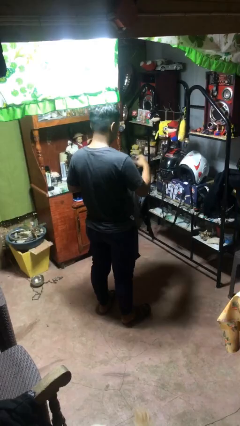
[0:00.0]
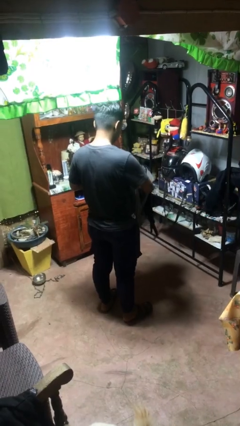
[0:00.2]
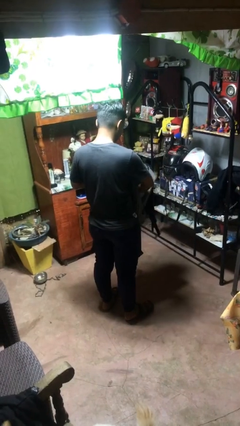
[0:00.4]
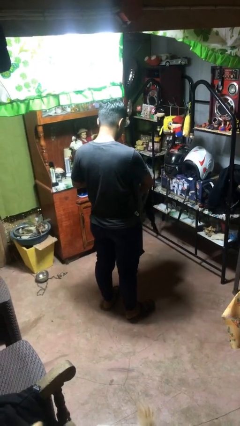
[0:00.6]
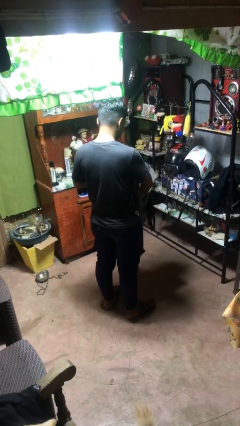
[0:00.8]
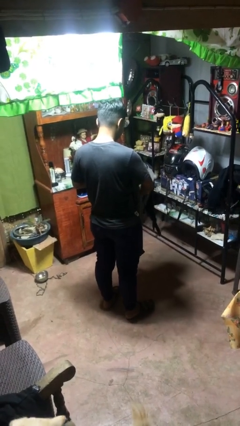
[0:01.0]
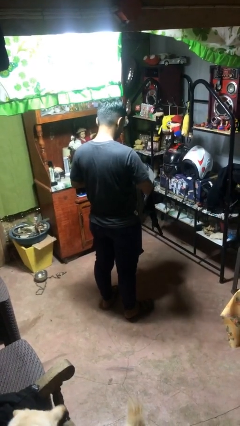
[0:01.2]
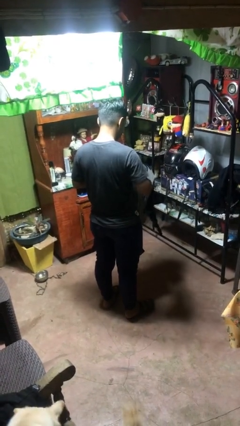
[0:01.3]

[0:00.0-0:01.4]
person puts object into bag

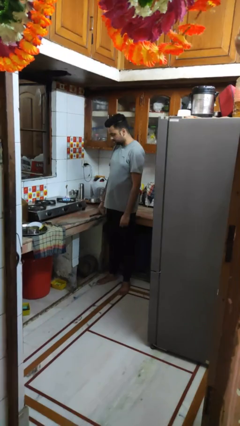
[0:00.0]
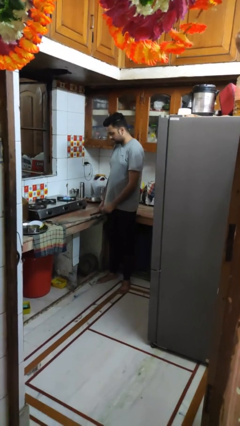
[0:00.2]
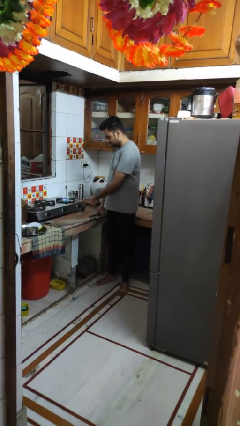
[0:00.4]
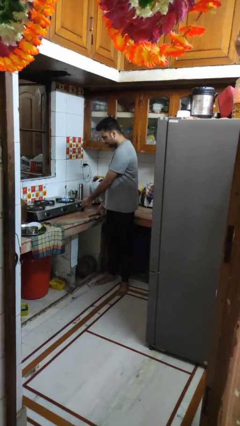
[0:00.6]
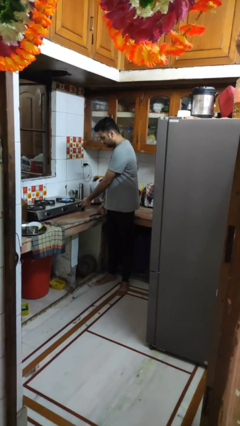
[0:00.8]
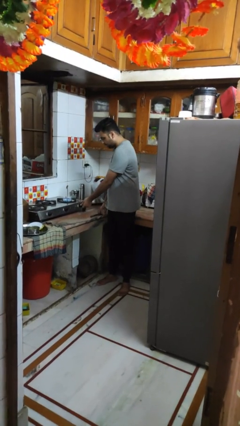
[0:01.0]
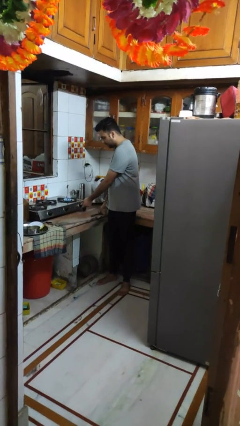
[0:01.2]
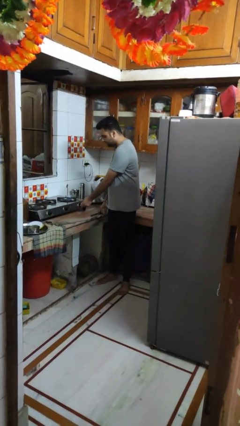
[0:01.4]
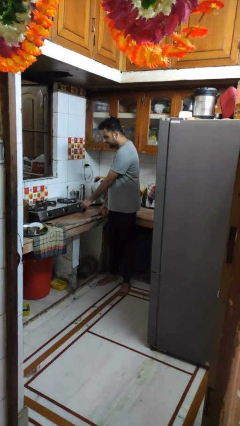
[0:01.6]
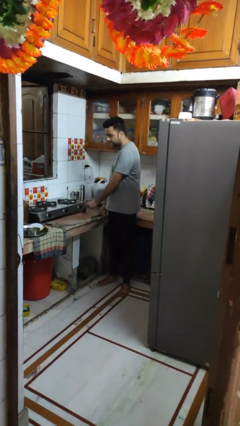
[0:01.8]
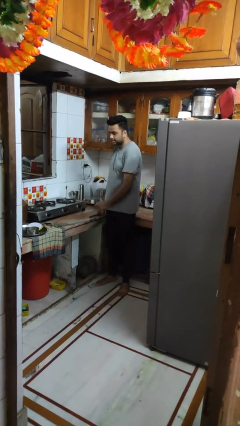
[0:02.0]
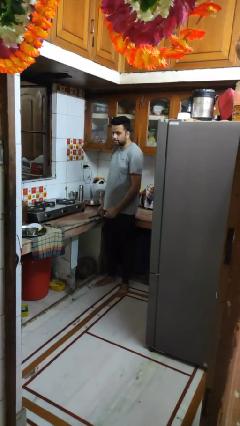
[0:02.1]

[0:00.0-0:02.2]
person turns off stovetop

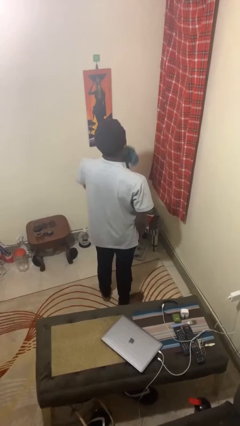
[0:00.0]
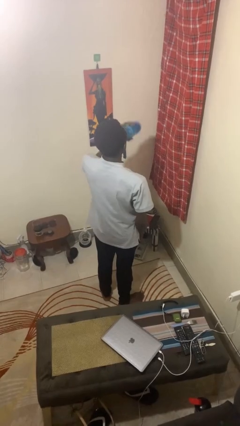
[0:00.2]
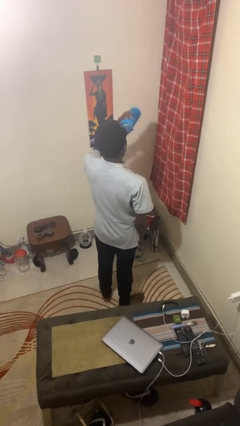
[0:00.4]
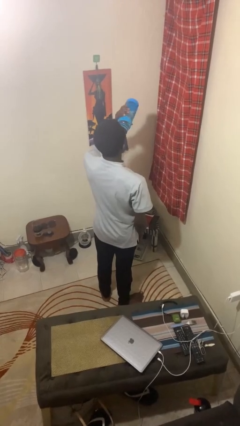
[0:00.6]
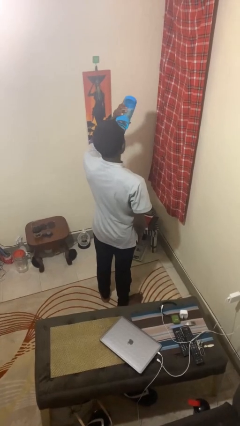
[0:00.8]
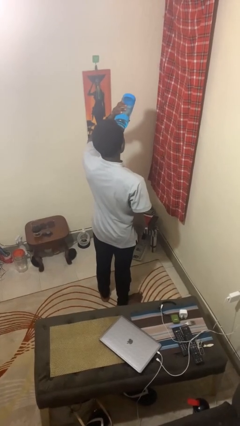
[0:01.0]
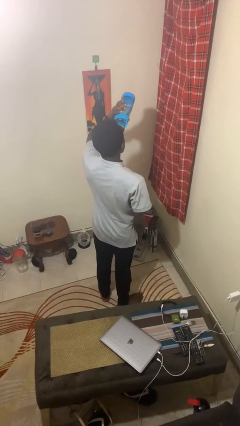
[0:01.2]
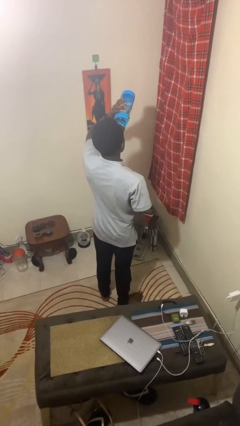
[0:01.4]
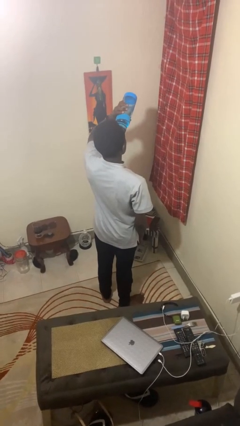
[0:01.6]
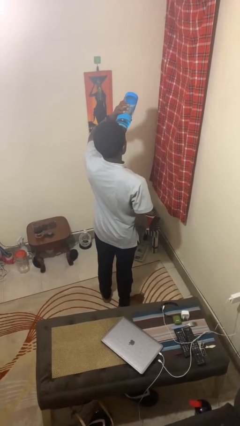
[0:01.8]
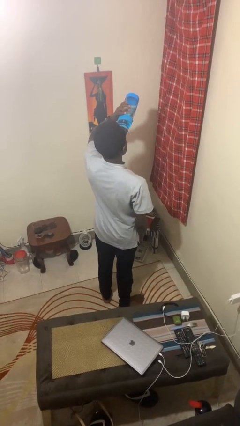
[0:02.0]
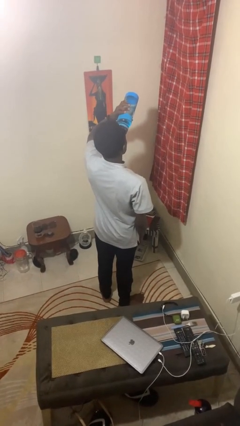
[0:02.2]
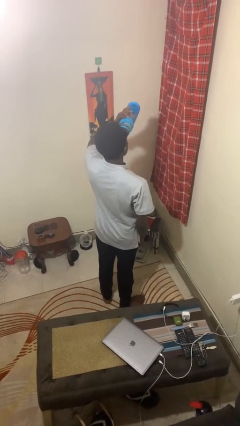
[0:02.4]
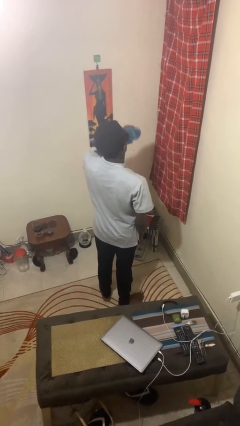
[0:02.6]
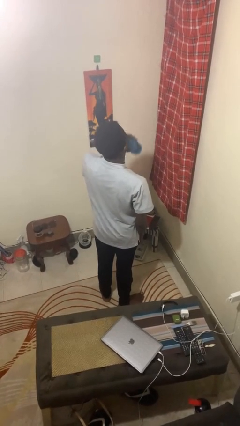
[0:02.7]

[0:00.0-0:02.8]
person drinks from bottle

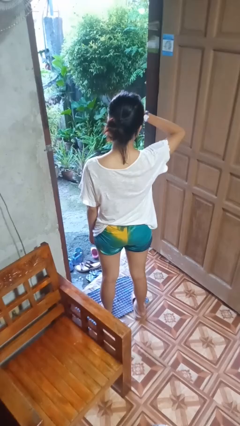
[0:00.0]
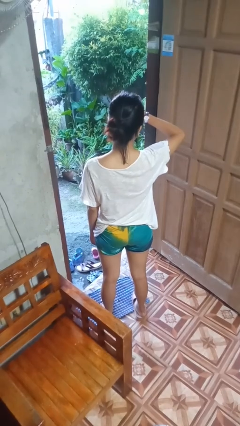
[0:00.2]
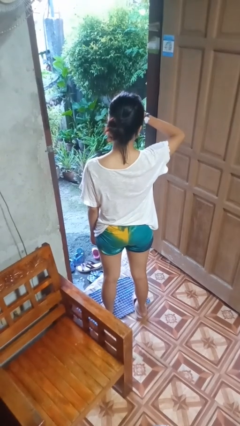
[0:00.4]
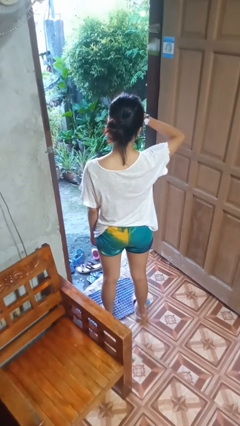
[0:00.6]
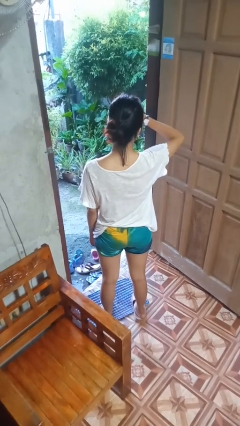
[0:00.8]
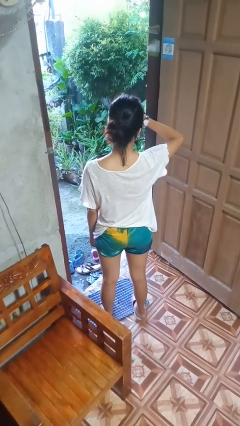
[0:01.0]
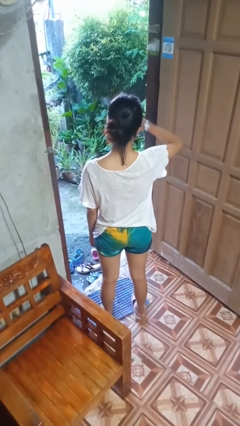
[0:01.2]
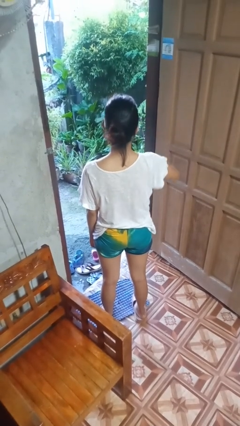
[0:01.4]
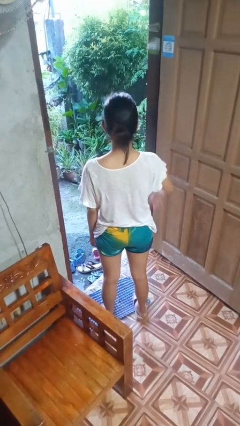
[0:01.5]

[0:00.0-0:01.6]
person looks at wristwatch

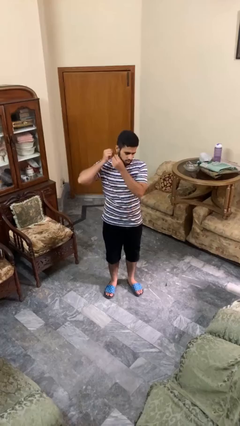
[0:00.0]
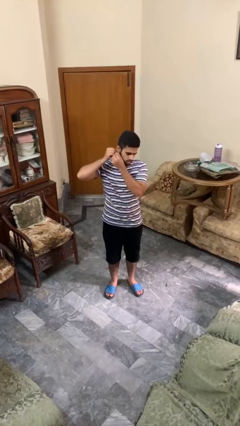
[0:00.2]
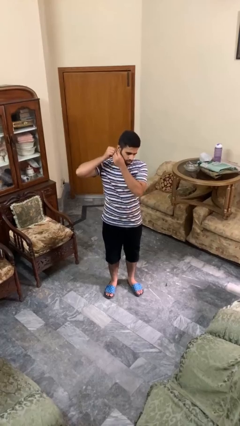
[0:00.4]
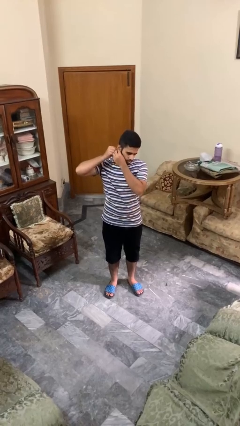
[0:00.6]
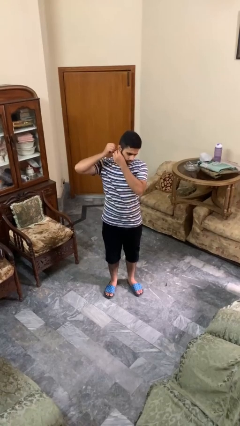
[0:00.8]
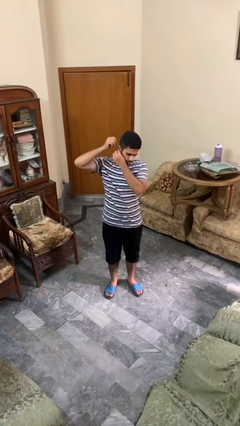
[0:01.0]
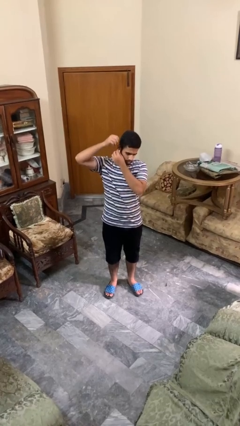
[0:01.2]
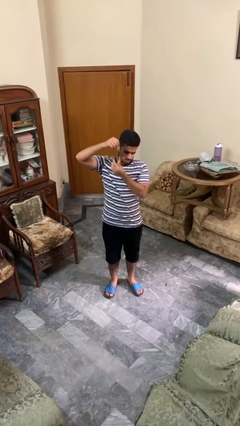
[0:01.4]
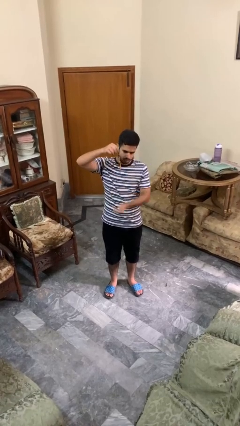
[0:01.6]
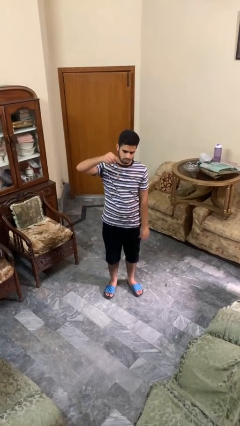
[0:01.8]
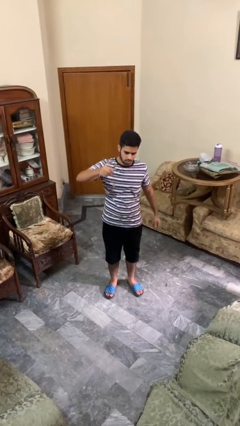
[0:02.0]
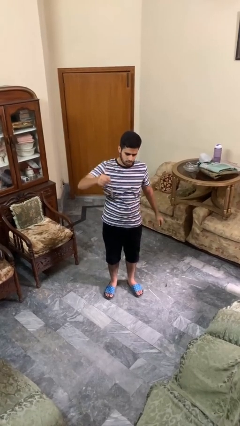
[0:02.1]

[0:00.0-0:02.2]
person takes off earrings

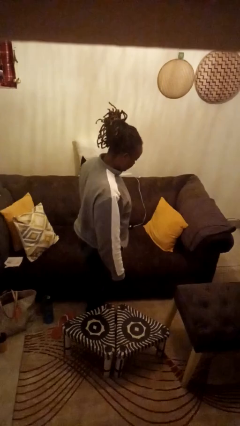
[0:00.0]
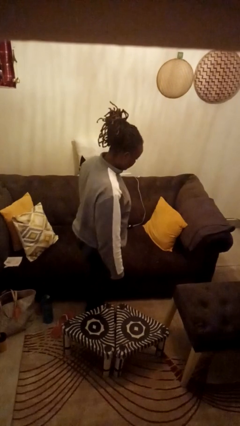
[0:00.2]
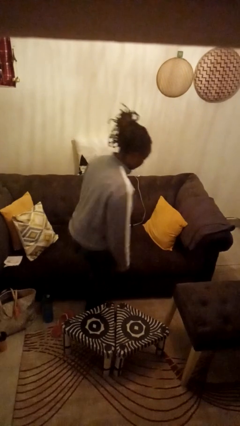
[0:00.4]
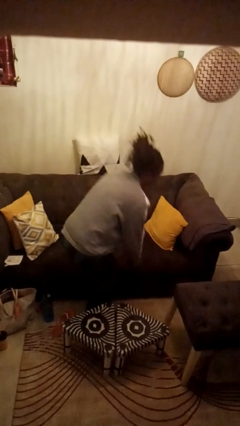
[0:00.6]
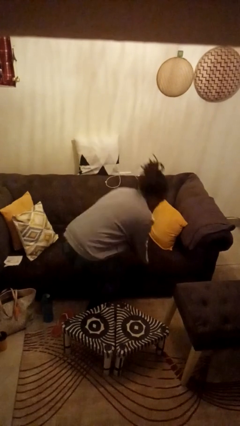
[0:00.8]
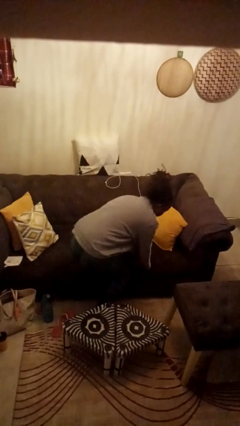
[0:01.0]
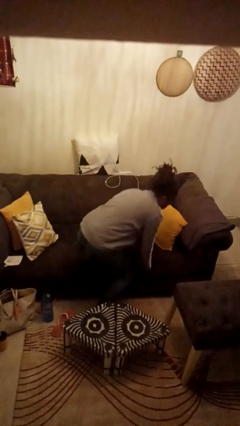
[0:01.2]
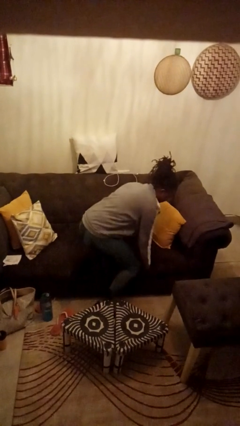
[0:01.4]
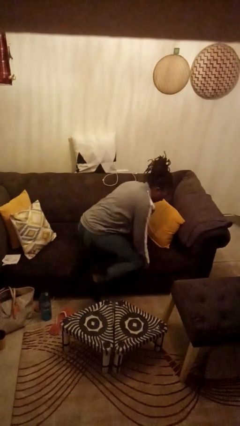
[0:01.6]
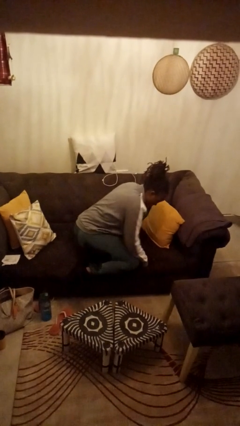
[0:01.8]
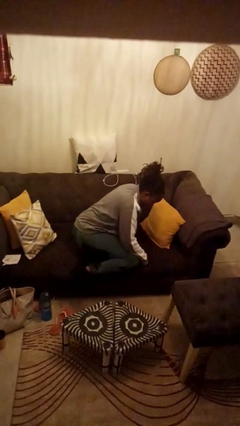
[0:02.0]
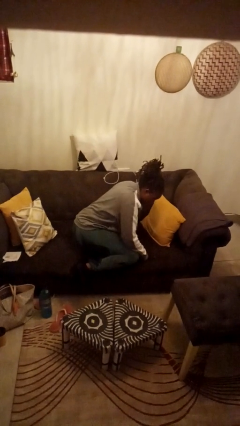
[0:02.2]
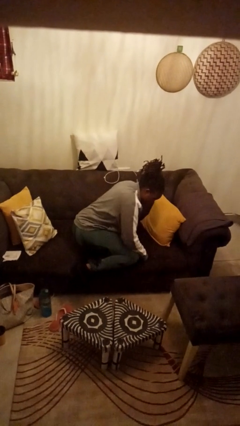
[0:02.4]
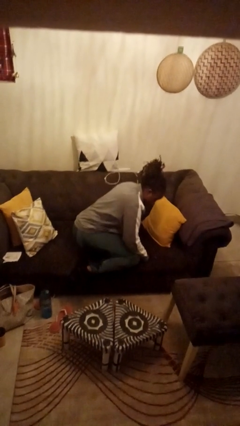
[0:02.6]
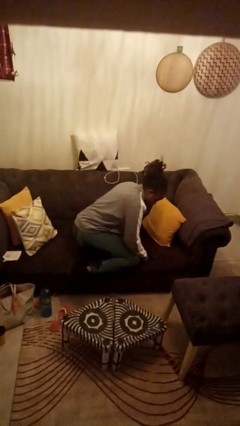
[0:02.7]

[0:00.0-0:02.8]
person climbs on couch

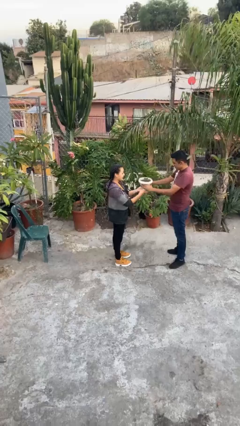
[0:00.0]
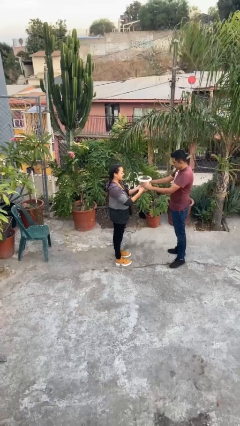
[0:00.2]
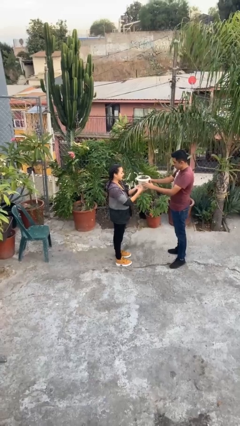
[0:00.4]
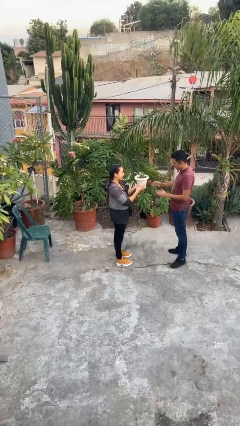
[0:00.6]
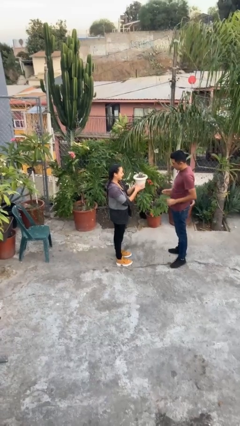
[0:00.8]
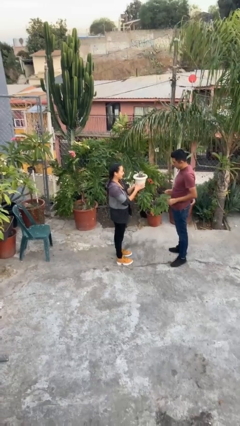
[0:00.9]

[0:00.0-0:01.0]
person transfers object to person

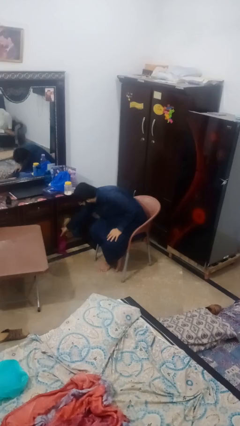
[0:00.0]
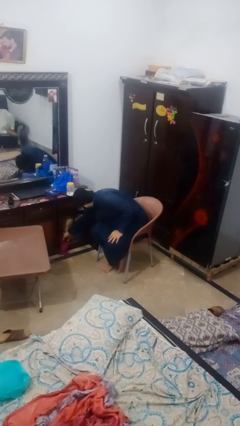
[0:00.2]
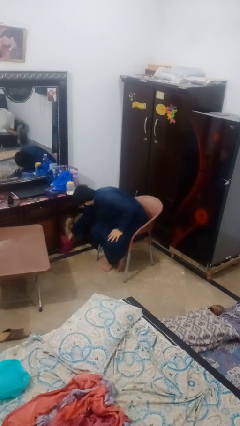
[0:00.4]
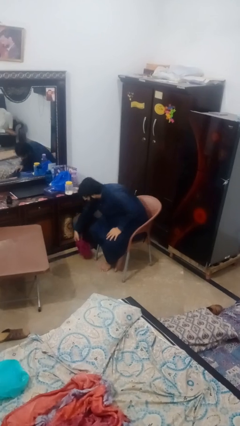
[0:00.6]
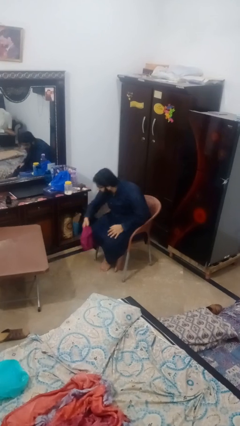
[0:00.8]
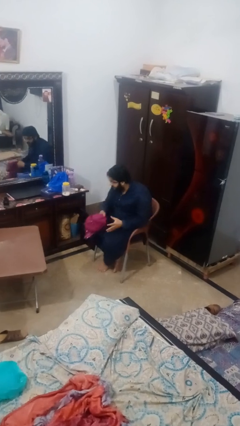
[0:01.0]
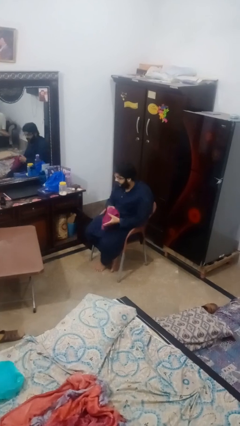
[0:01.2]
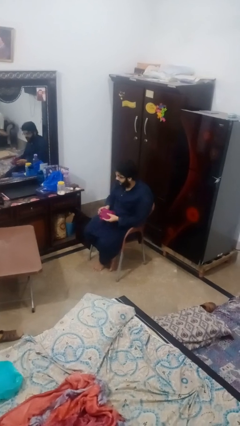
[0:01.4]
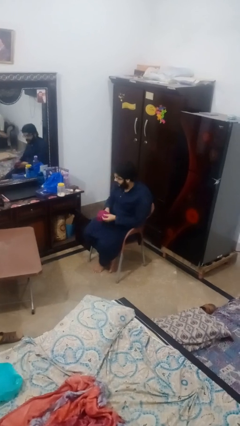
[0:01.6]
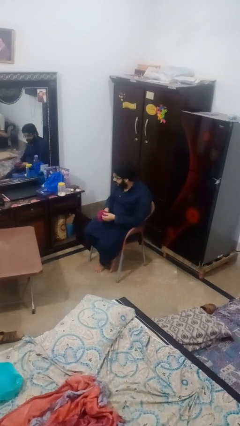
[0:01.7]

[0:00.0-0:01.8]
person takes clothes from dresser

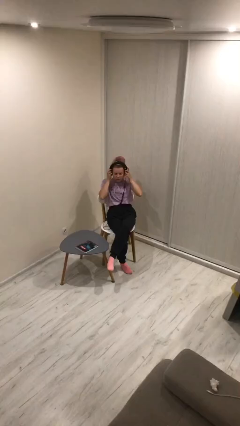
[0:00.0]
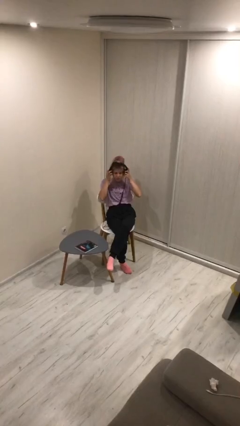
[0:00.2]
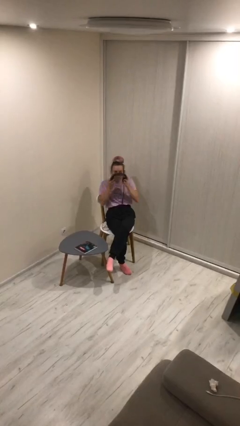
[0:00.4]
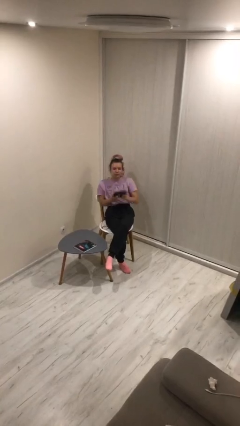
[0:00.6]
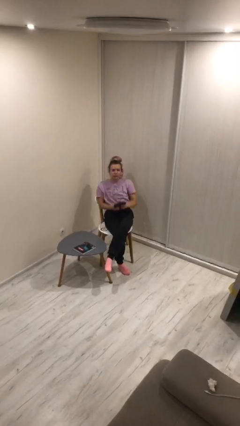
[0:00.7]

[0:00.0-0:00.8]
person takes off headphones
